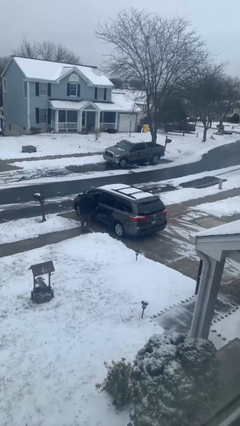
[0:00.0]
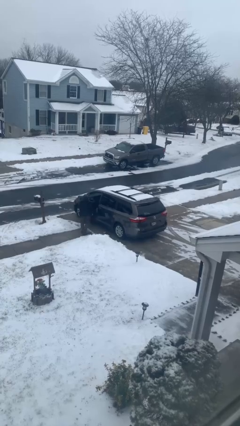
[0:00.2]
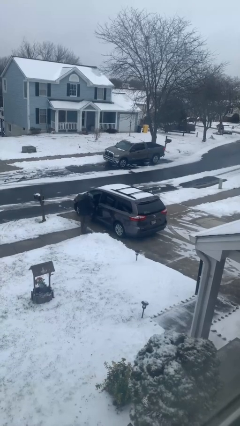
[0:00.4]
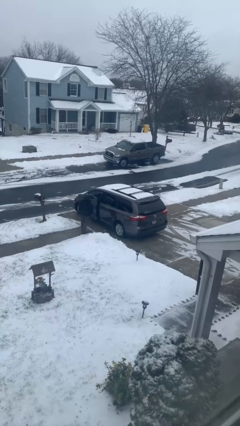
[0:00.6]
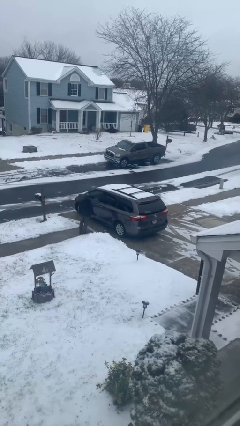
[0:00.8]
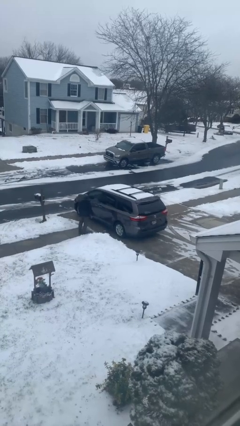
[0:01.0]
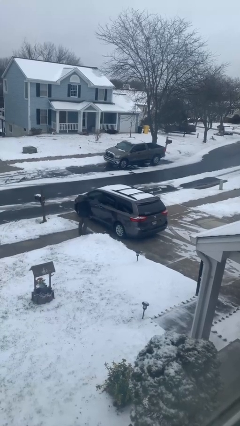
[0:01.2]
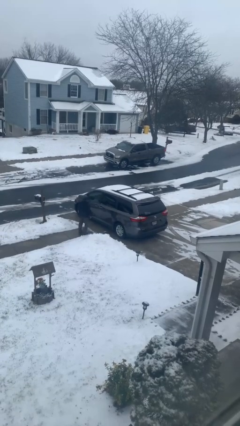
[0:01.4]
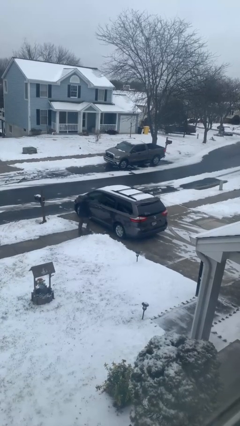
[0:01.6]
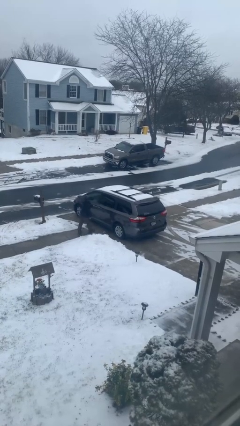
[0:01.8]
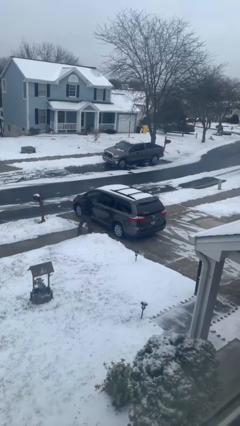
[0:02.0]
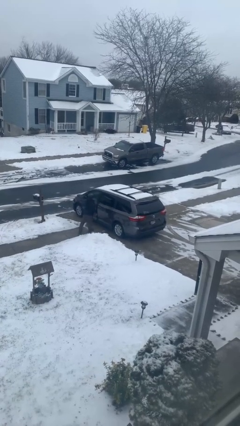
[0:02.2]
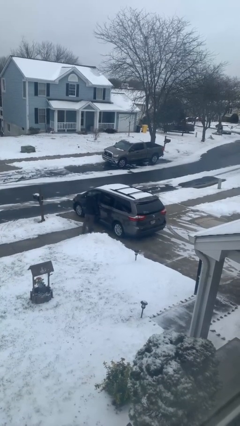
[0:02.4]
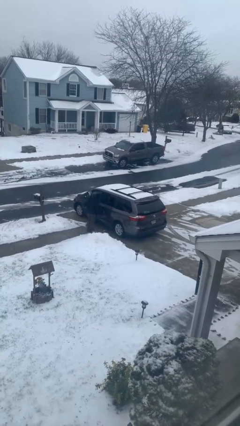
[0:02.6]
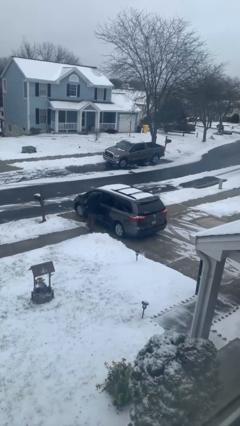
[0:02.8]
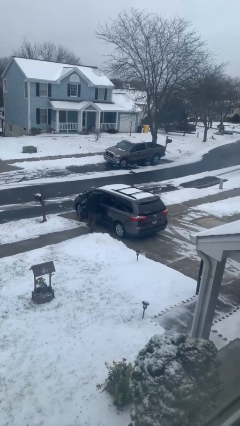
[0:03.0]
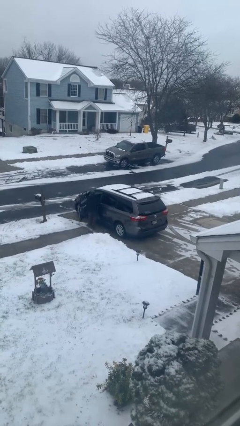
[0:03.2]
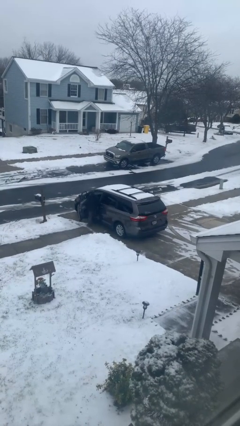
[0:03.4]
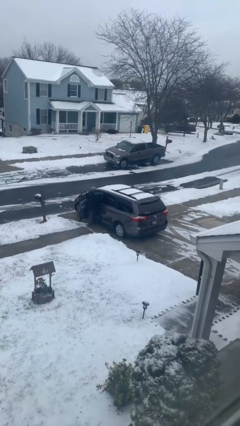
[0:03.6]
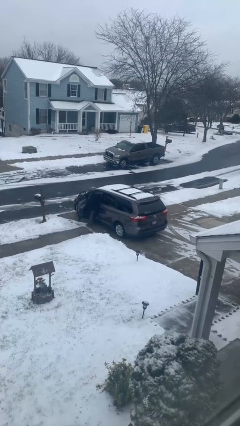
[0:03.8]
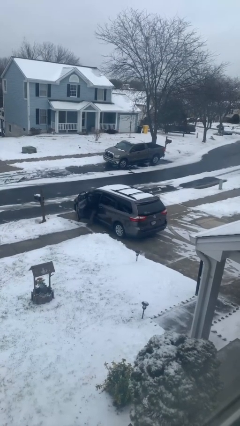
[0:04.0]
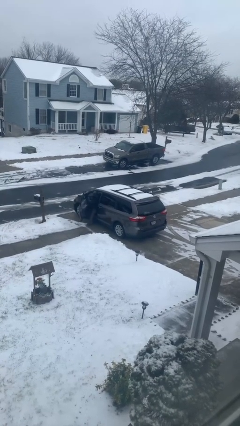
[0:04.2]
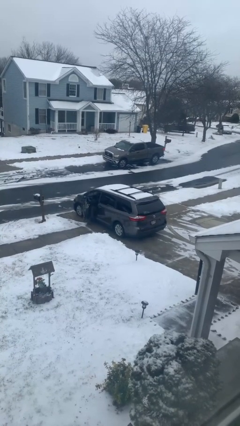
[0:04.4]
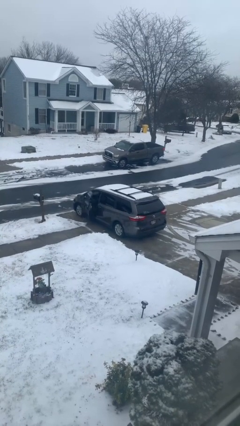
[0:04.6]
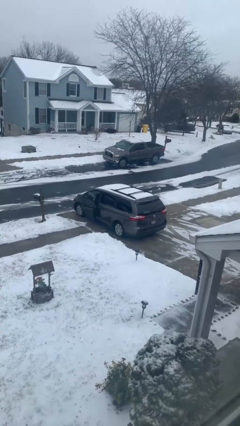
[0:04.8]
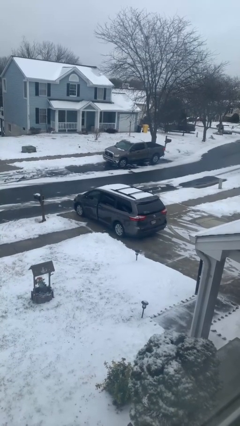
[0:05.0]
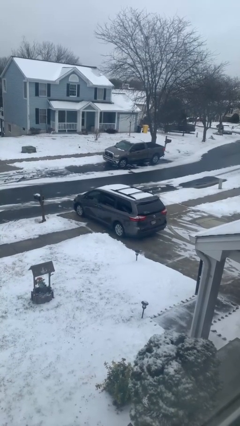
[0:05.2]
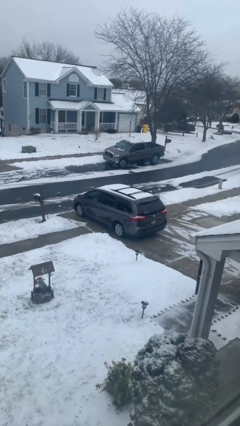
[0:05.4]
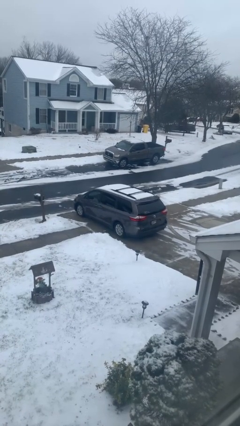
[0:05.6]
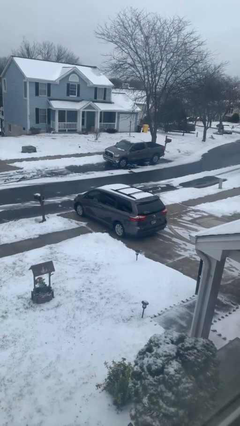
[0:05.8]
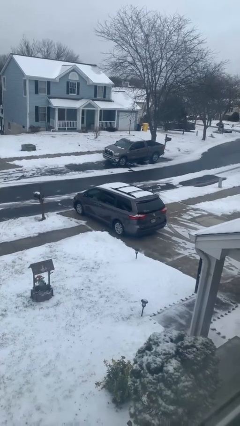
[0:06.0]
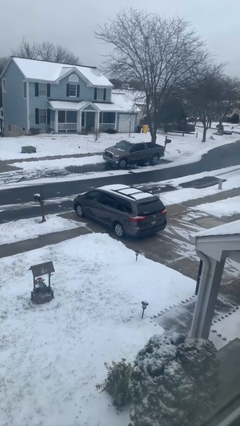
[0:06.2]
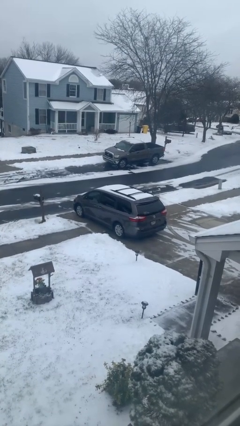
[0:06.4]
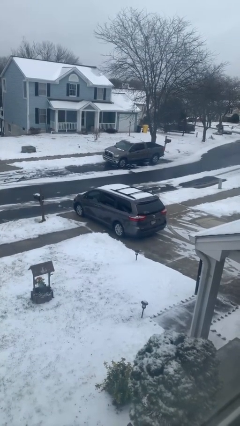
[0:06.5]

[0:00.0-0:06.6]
car picks up person

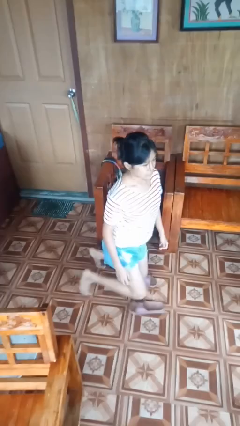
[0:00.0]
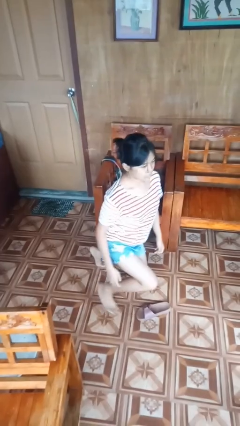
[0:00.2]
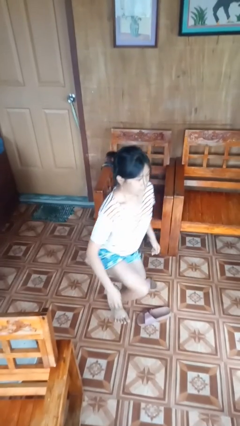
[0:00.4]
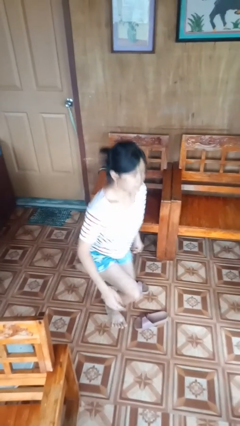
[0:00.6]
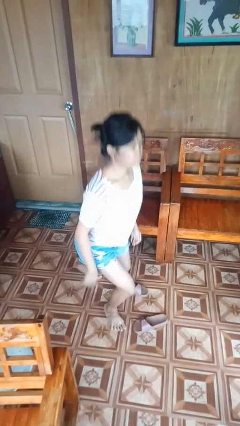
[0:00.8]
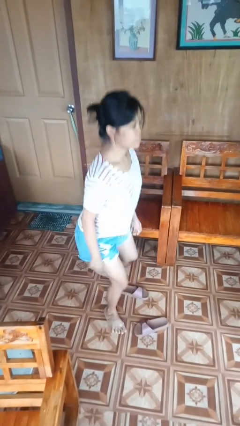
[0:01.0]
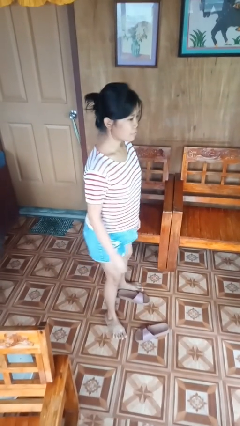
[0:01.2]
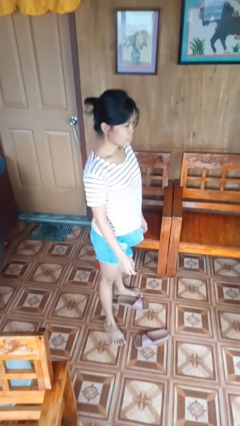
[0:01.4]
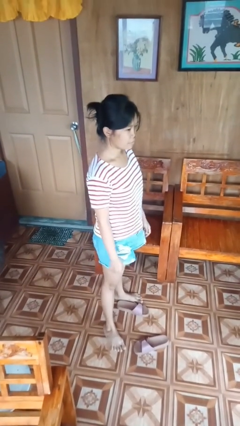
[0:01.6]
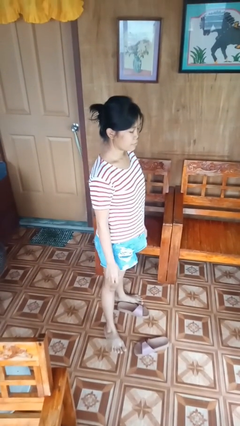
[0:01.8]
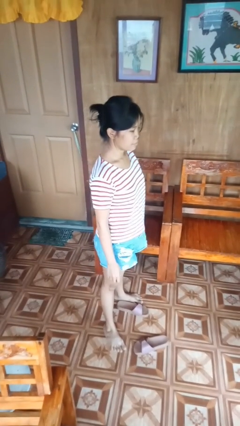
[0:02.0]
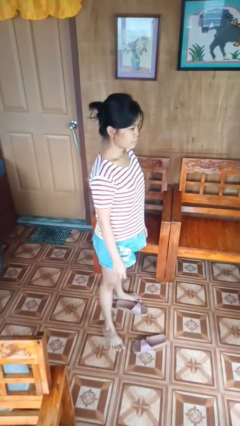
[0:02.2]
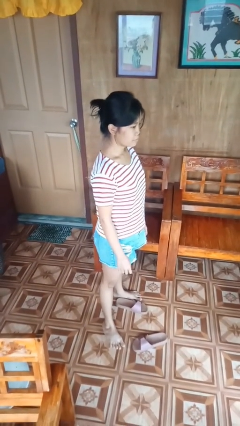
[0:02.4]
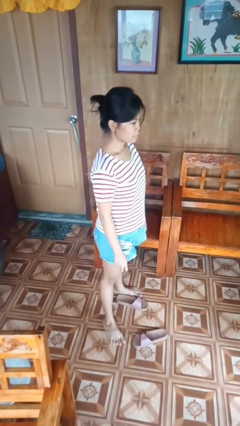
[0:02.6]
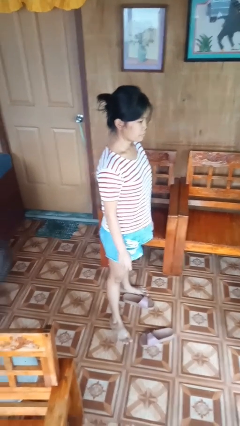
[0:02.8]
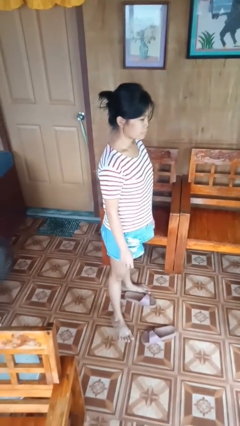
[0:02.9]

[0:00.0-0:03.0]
person stands up from floor

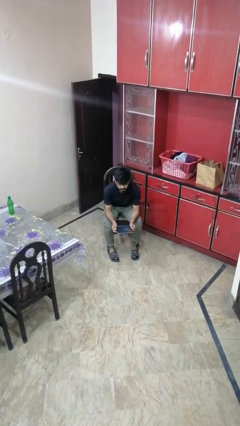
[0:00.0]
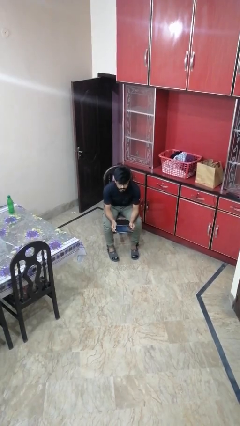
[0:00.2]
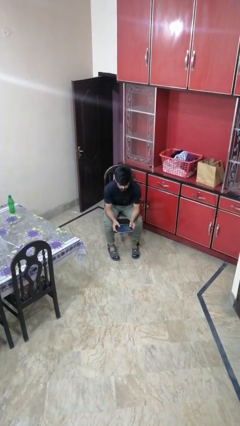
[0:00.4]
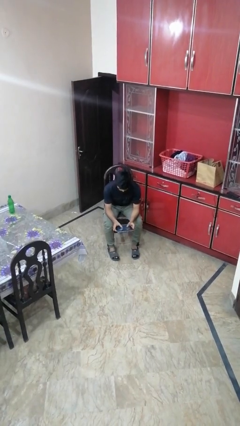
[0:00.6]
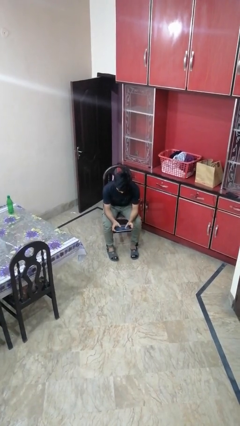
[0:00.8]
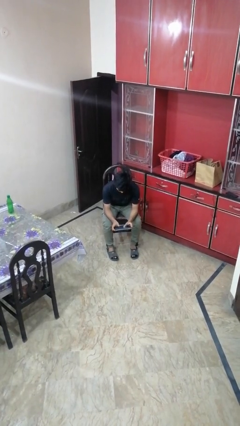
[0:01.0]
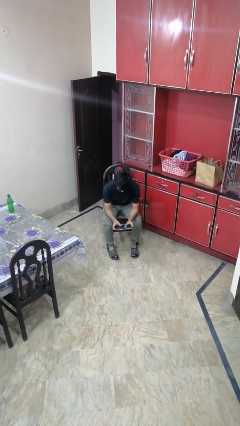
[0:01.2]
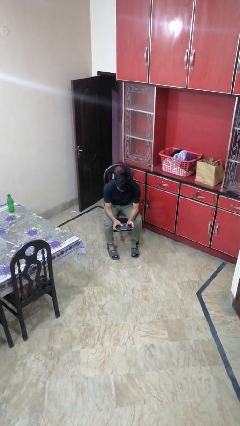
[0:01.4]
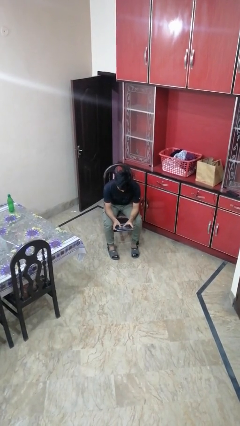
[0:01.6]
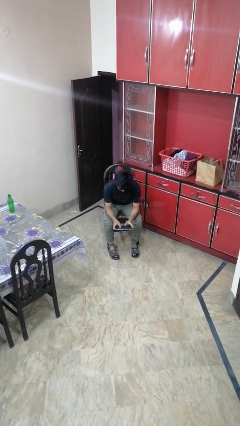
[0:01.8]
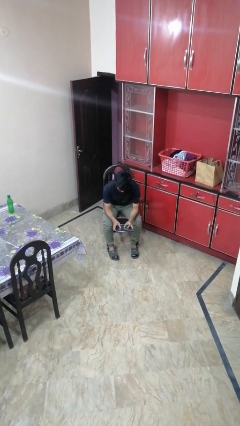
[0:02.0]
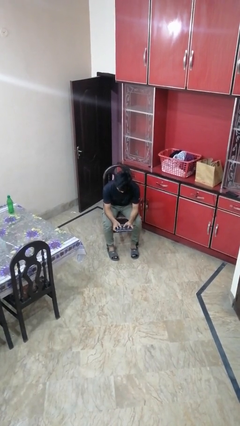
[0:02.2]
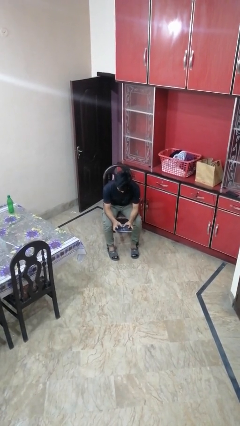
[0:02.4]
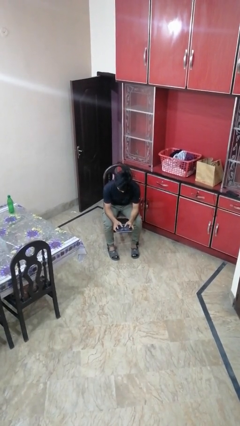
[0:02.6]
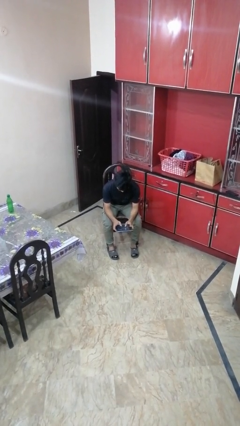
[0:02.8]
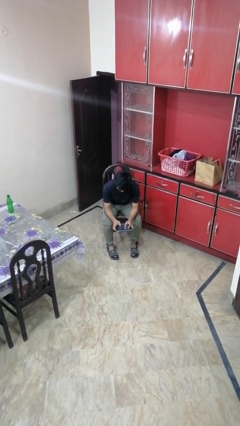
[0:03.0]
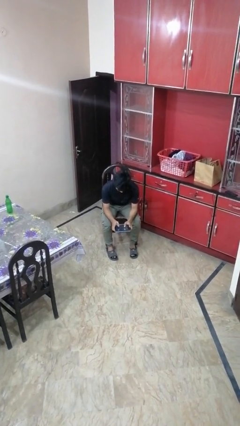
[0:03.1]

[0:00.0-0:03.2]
person interacts with tablet

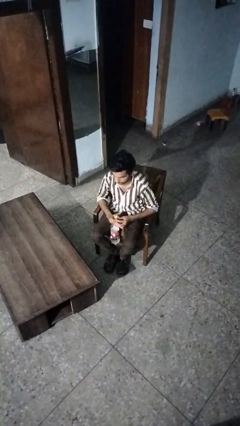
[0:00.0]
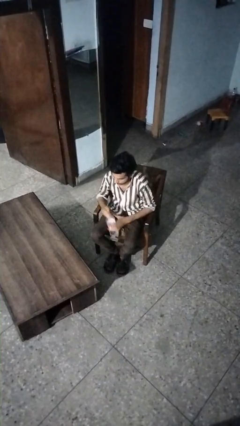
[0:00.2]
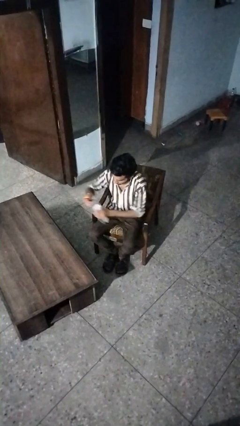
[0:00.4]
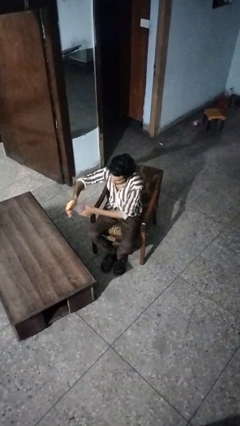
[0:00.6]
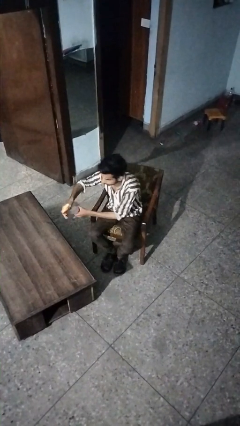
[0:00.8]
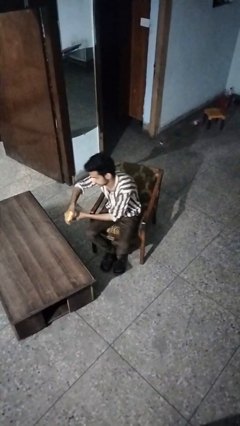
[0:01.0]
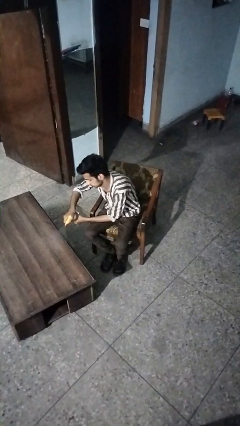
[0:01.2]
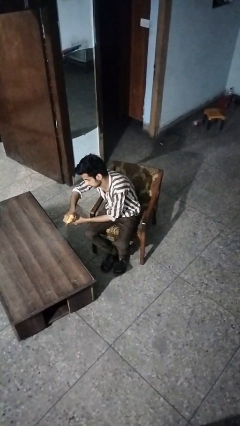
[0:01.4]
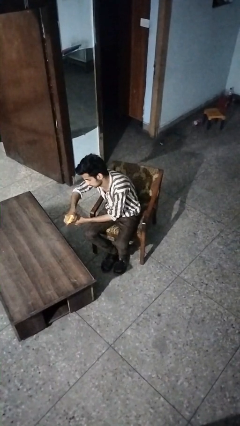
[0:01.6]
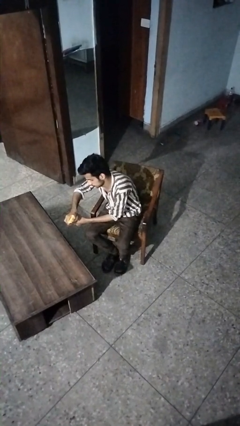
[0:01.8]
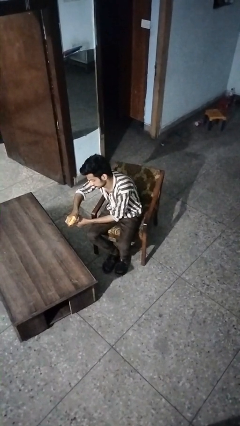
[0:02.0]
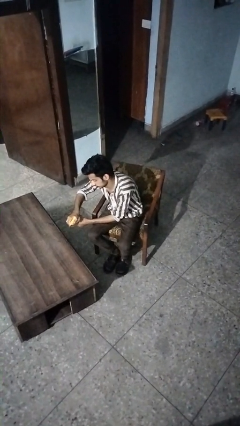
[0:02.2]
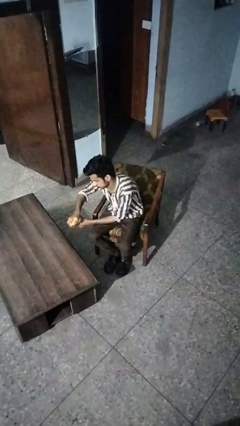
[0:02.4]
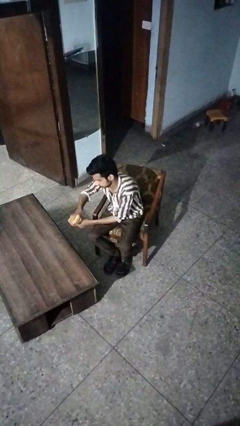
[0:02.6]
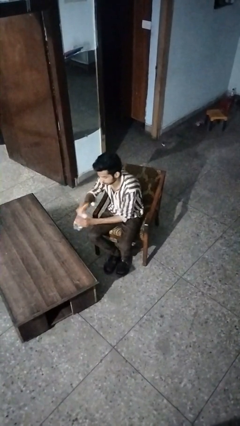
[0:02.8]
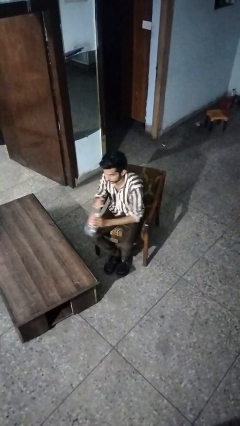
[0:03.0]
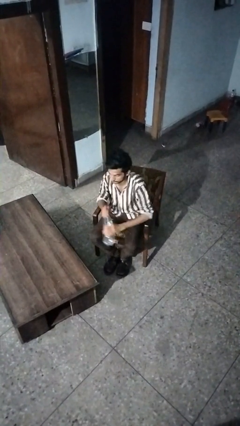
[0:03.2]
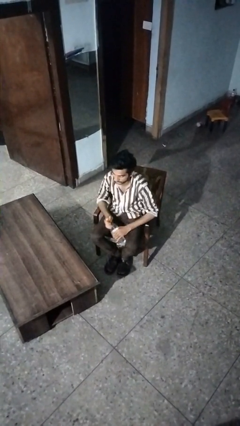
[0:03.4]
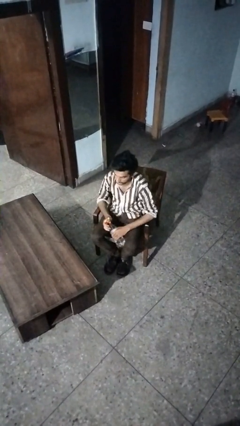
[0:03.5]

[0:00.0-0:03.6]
person sprays from bottle

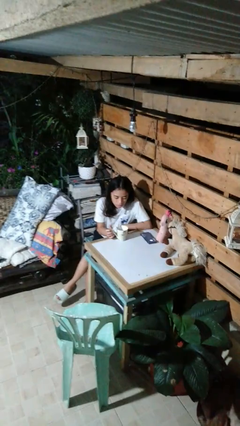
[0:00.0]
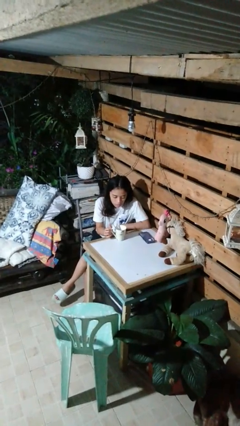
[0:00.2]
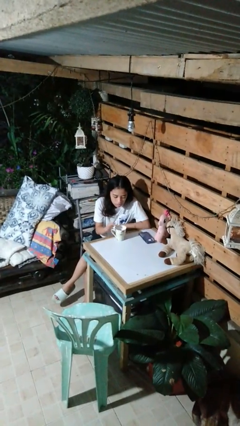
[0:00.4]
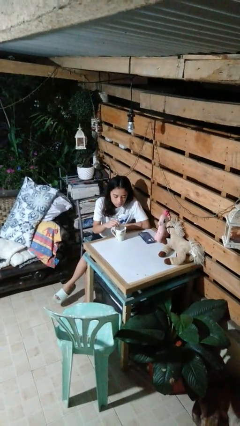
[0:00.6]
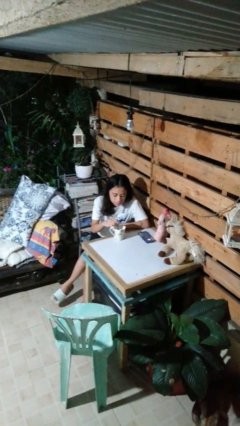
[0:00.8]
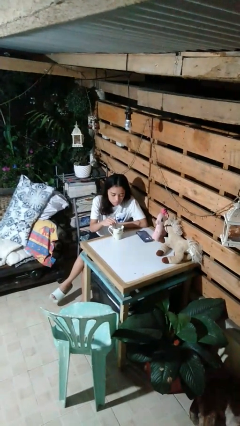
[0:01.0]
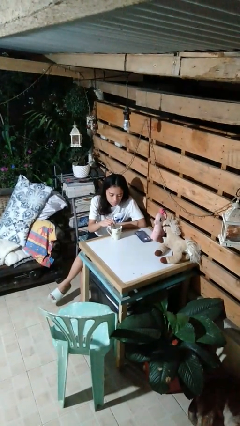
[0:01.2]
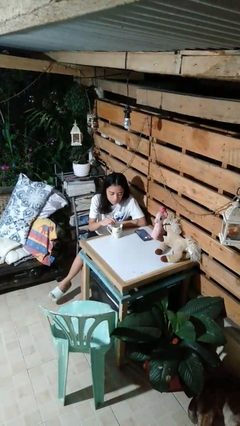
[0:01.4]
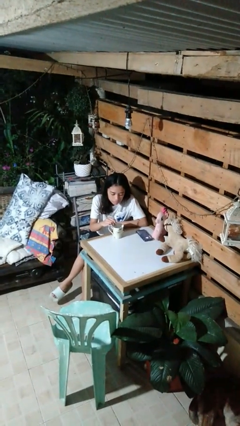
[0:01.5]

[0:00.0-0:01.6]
person stirs mug
